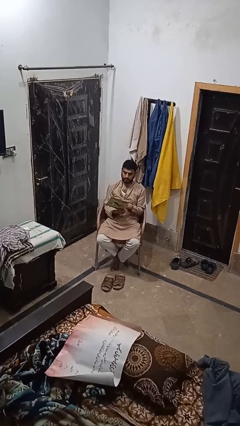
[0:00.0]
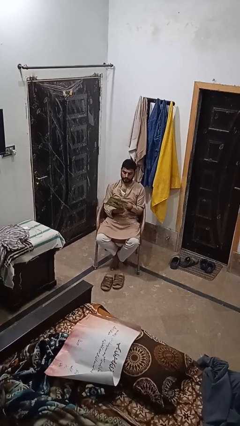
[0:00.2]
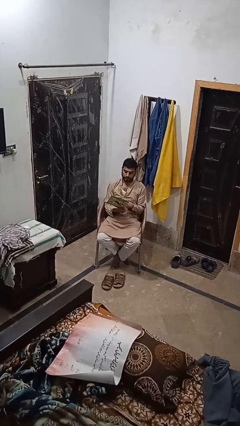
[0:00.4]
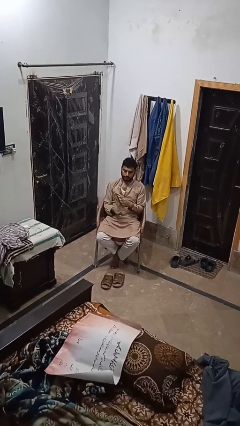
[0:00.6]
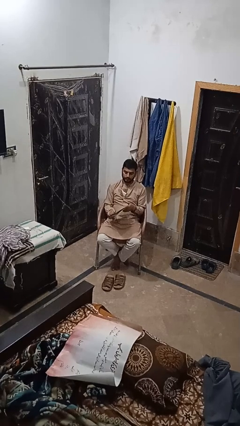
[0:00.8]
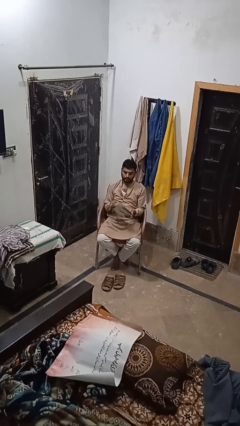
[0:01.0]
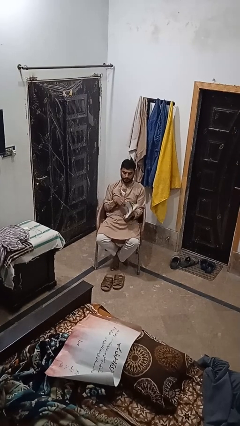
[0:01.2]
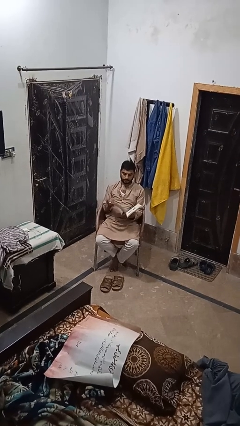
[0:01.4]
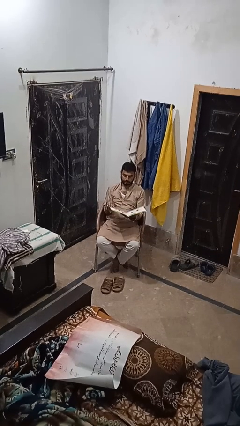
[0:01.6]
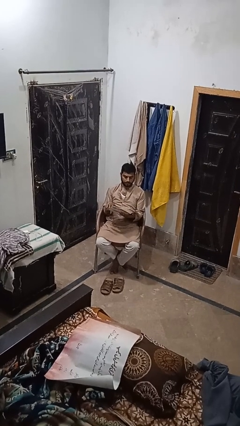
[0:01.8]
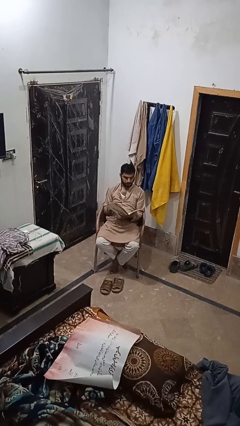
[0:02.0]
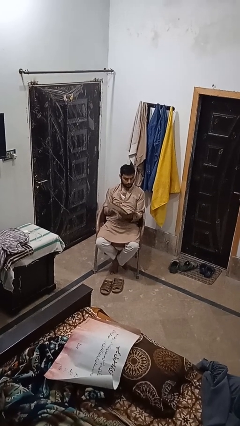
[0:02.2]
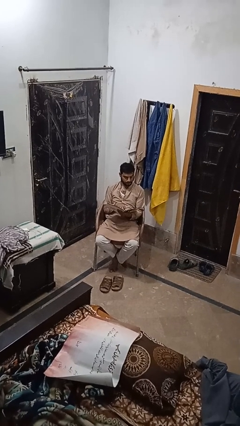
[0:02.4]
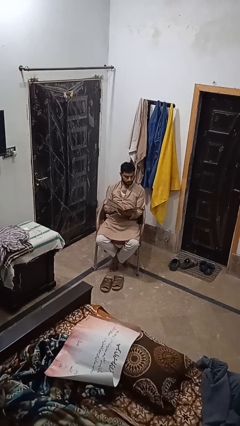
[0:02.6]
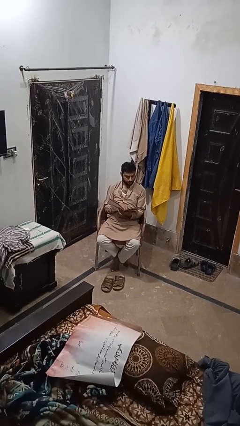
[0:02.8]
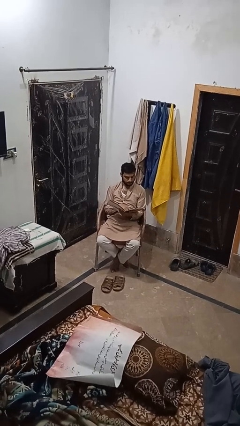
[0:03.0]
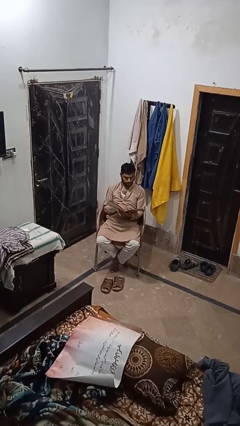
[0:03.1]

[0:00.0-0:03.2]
person reads magazine

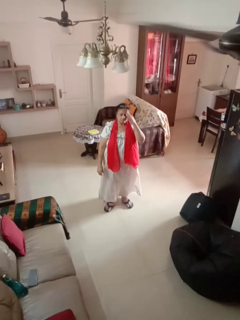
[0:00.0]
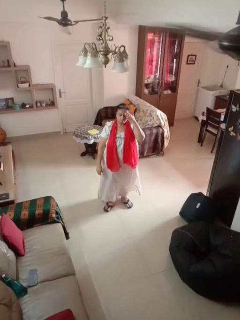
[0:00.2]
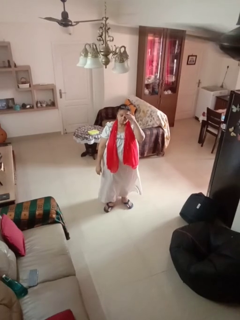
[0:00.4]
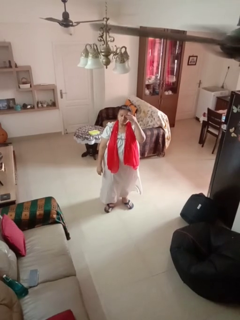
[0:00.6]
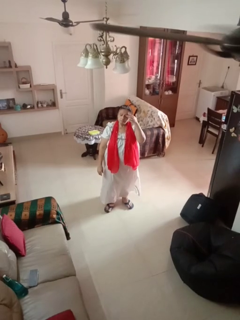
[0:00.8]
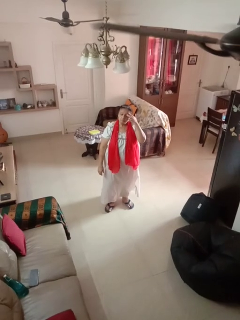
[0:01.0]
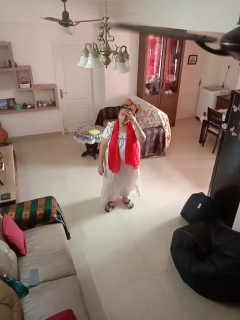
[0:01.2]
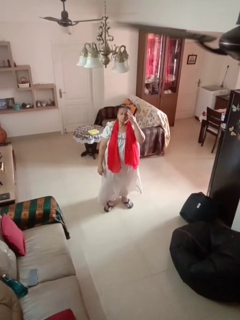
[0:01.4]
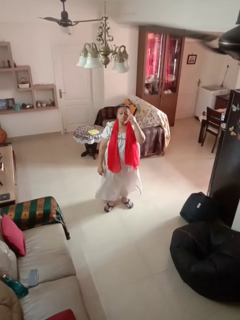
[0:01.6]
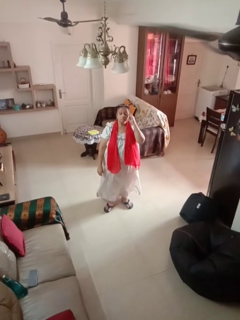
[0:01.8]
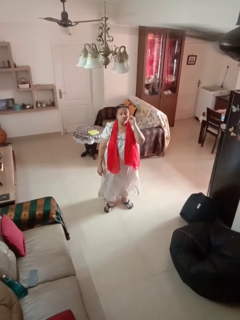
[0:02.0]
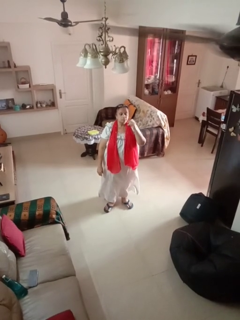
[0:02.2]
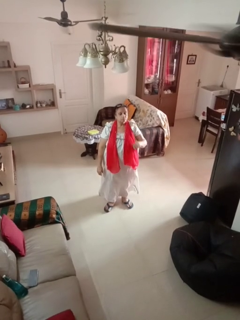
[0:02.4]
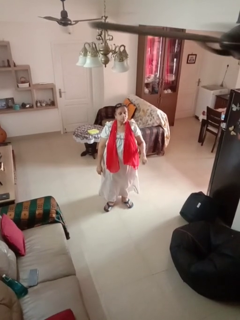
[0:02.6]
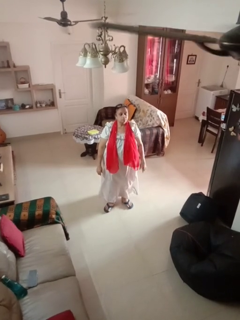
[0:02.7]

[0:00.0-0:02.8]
person scratches face

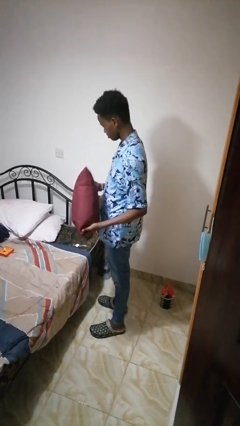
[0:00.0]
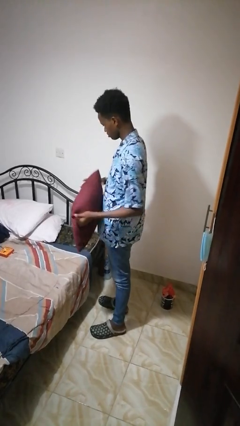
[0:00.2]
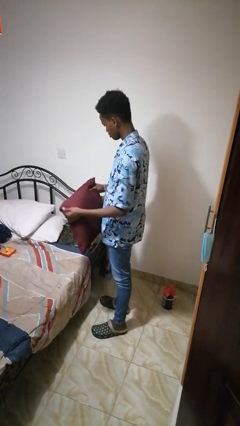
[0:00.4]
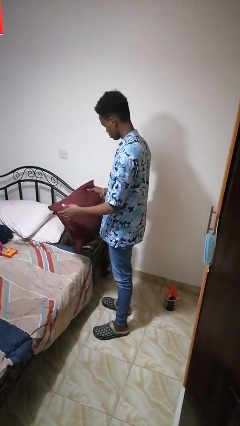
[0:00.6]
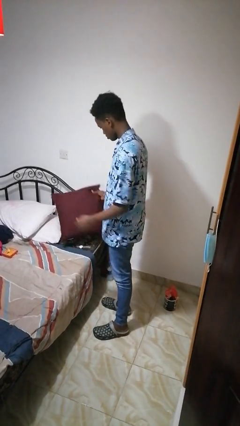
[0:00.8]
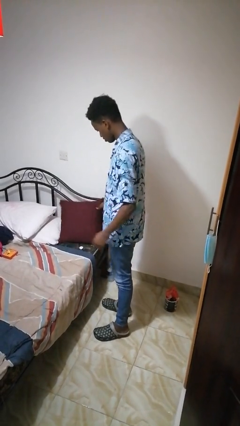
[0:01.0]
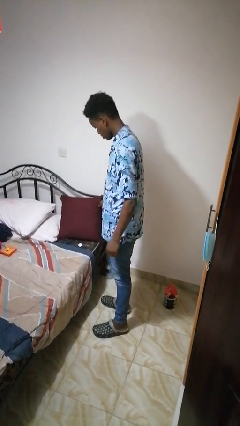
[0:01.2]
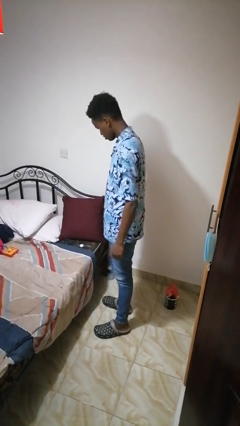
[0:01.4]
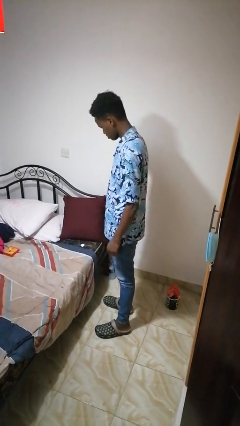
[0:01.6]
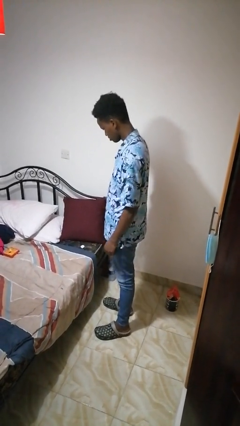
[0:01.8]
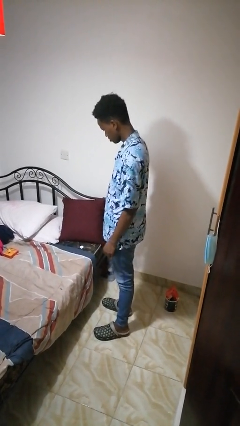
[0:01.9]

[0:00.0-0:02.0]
person puts down object on bed

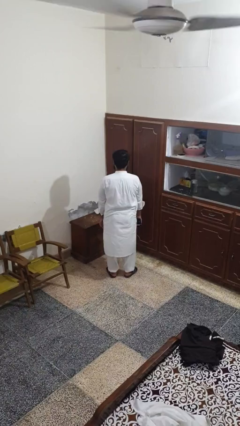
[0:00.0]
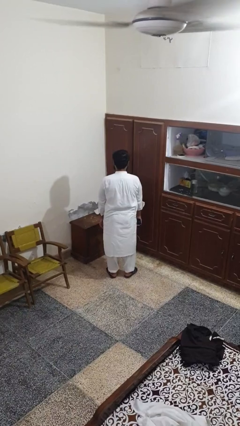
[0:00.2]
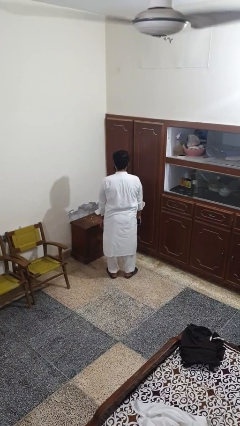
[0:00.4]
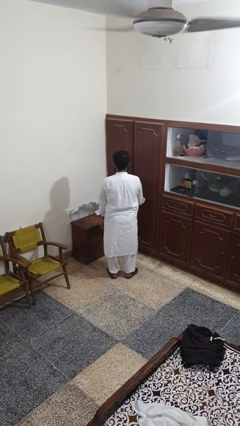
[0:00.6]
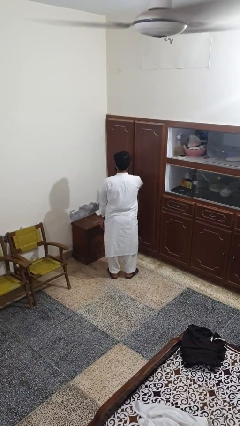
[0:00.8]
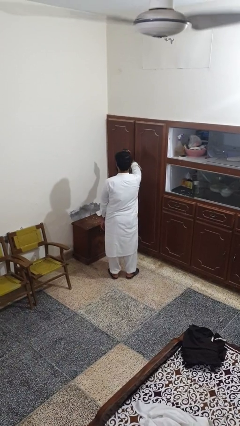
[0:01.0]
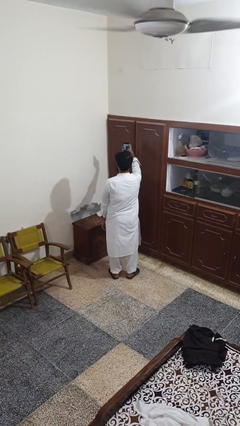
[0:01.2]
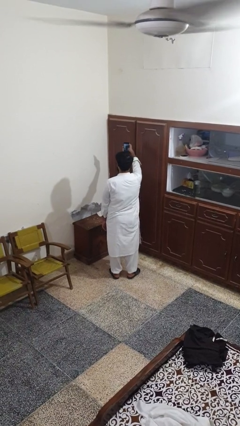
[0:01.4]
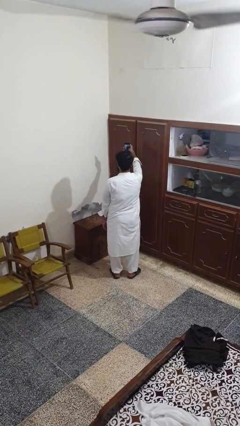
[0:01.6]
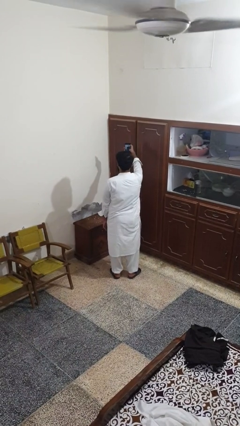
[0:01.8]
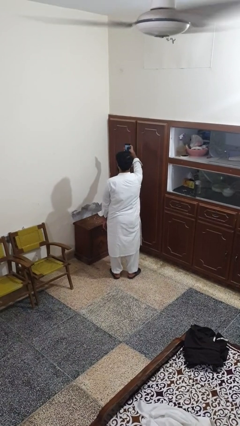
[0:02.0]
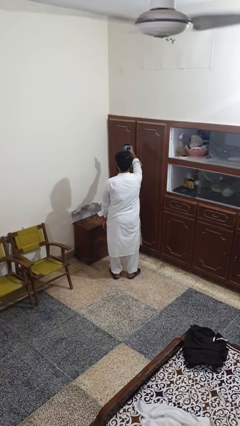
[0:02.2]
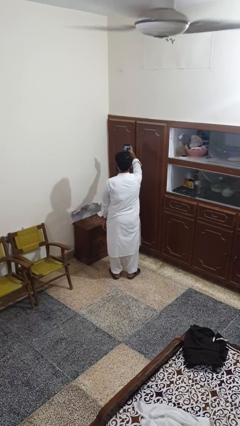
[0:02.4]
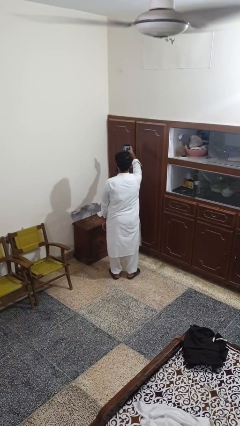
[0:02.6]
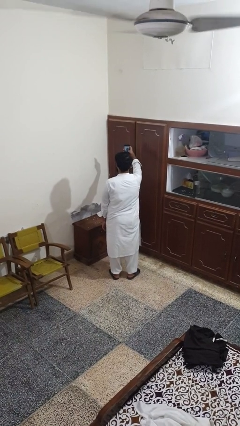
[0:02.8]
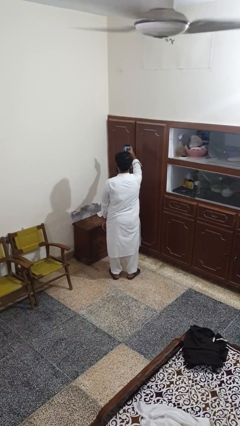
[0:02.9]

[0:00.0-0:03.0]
person takes selfie

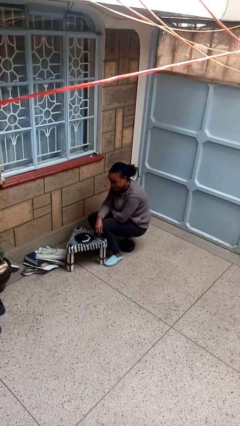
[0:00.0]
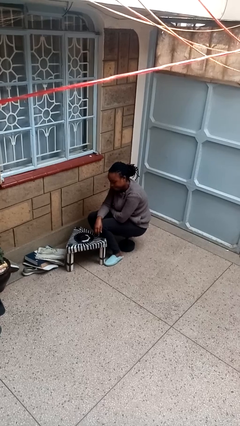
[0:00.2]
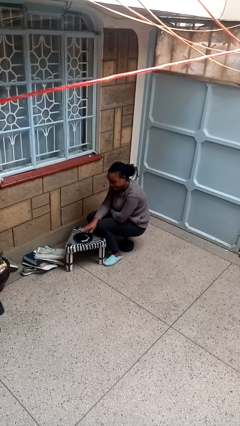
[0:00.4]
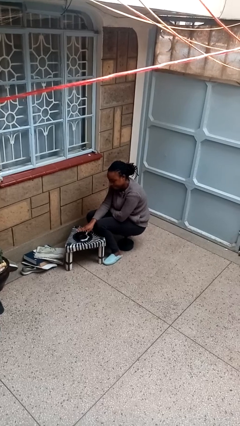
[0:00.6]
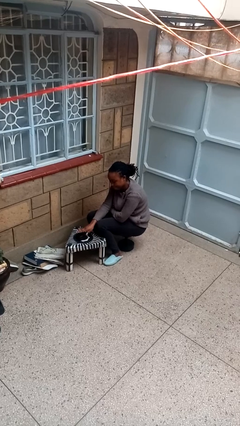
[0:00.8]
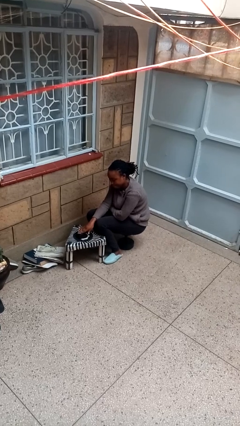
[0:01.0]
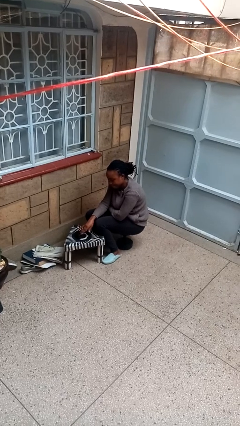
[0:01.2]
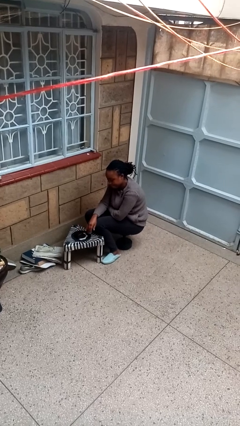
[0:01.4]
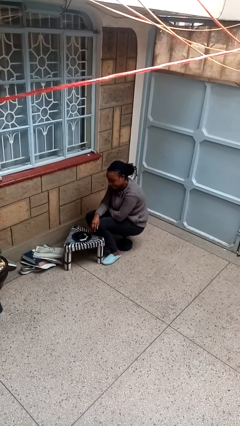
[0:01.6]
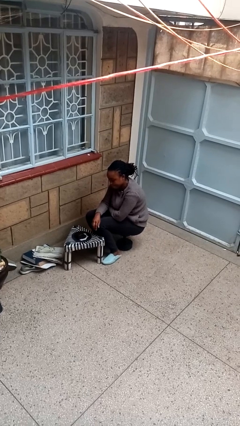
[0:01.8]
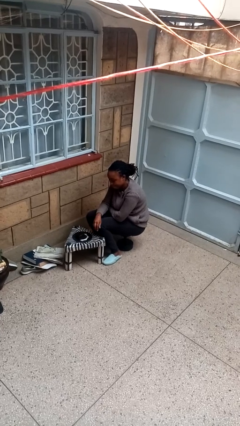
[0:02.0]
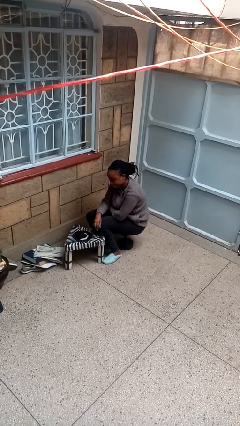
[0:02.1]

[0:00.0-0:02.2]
person taps object with finger

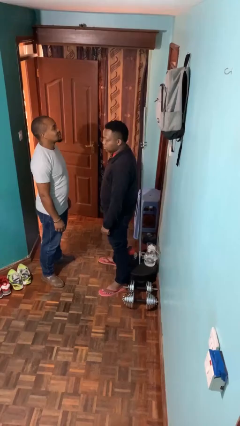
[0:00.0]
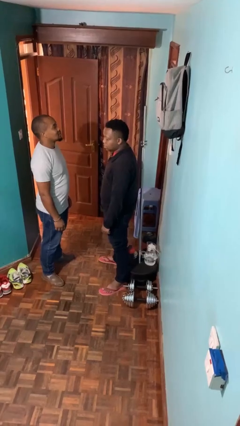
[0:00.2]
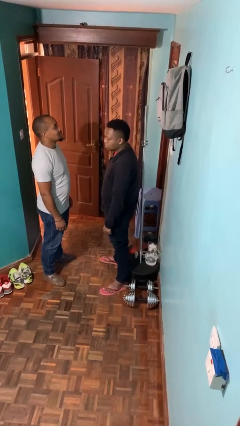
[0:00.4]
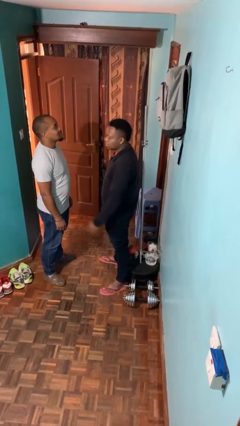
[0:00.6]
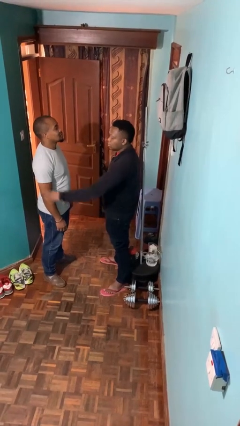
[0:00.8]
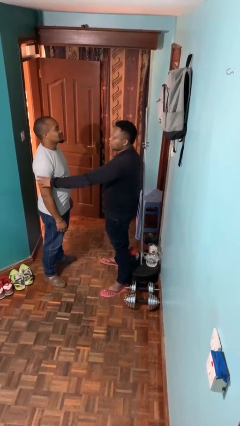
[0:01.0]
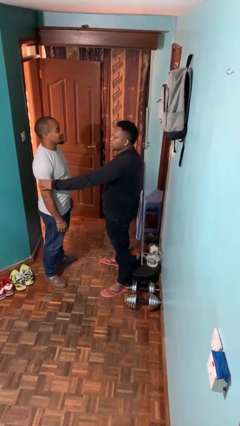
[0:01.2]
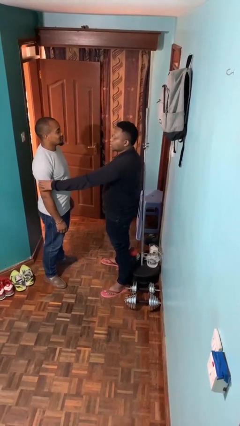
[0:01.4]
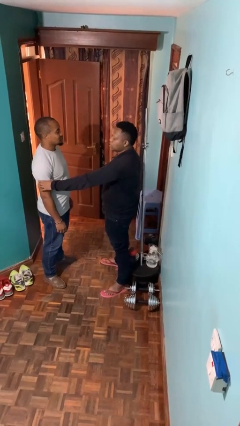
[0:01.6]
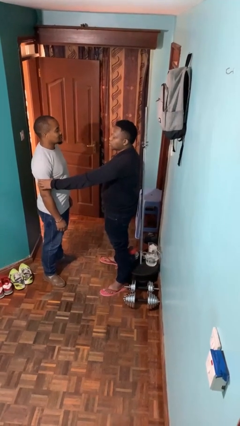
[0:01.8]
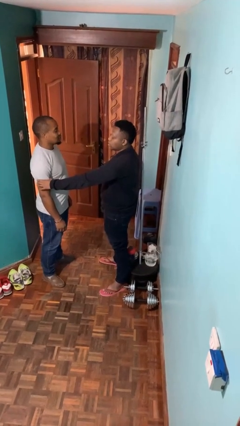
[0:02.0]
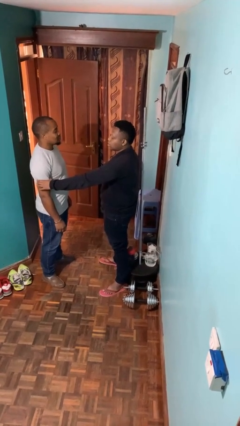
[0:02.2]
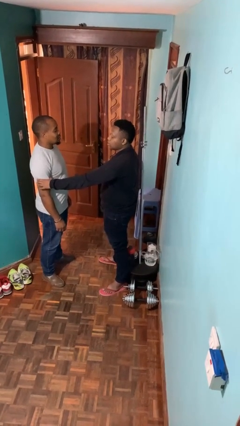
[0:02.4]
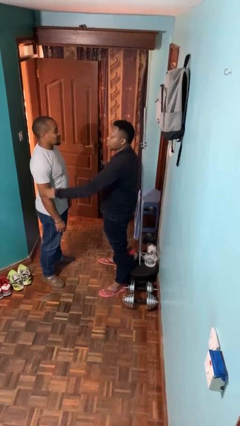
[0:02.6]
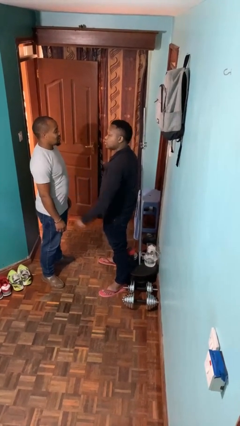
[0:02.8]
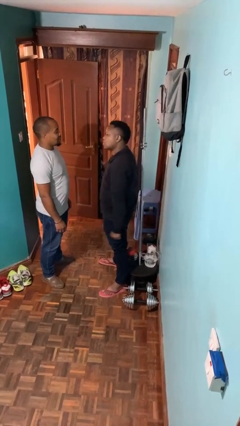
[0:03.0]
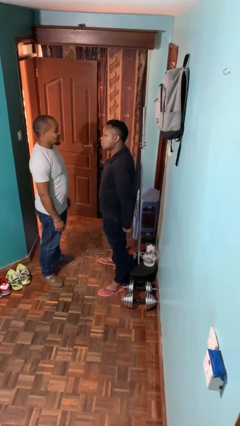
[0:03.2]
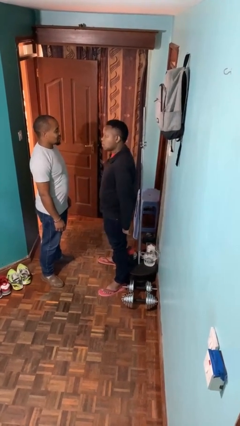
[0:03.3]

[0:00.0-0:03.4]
person grabs person by bicep

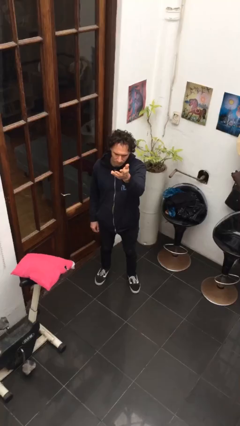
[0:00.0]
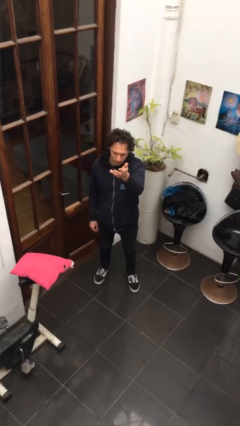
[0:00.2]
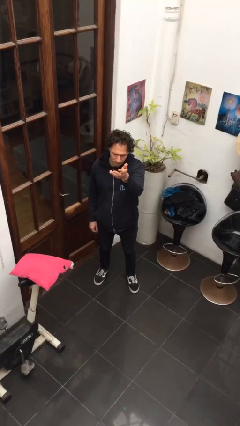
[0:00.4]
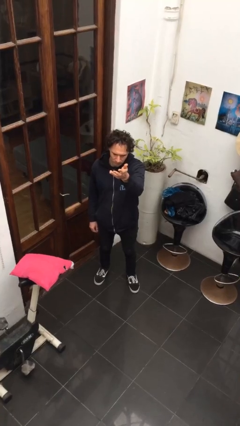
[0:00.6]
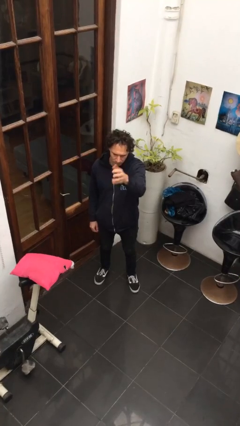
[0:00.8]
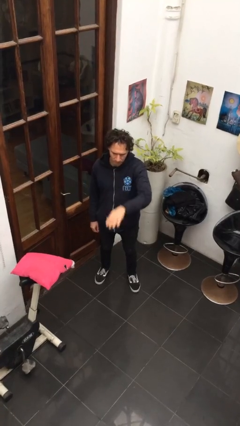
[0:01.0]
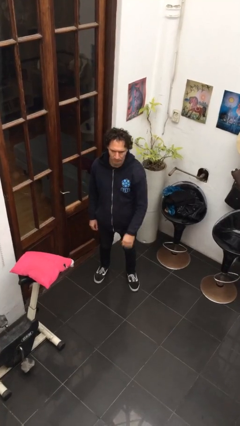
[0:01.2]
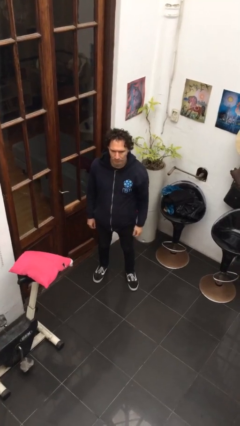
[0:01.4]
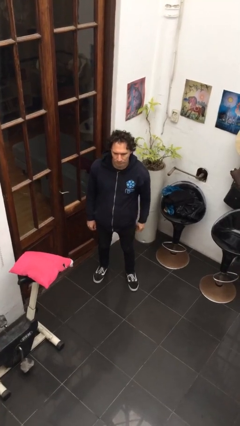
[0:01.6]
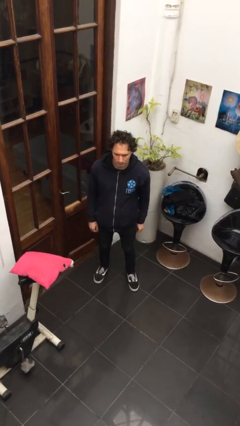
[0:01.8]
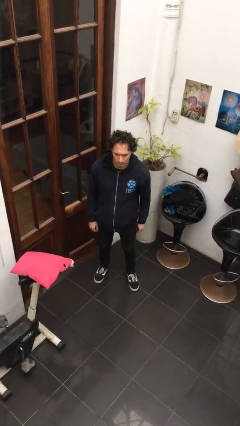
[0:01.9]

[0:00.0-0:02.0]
person gestures swipe down
